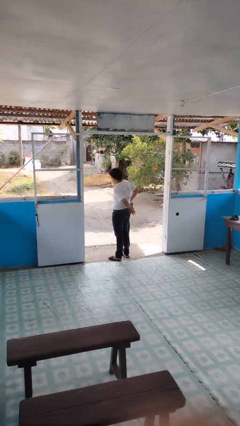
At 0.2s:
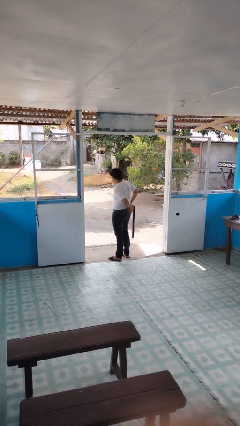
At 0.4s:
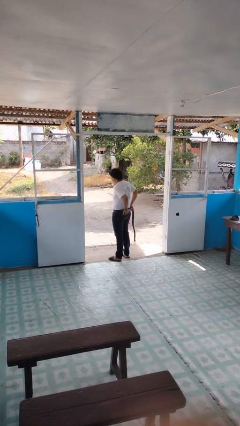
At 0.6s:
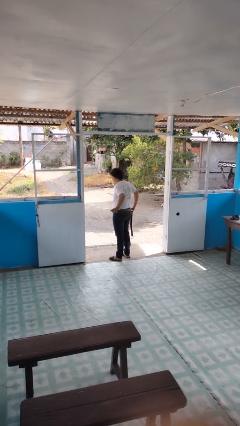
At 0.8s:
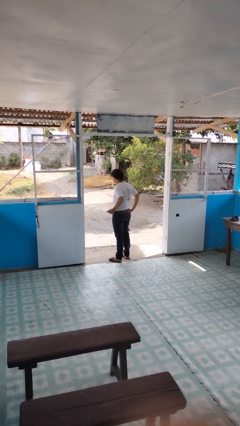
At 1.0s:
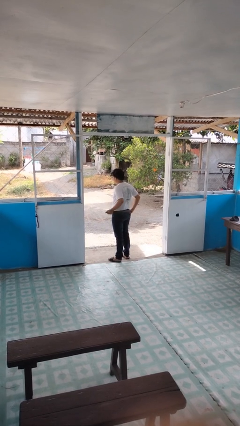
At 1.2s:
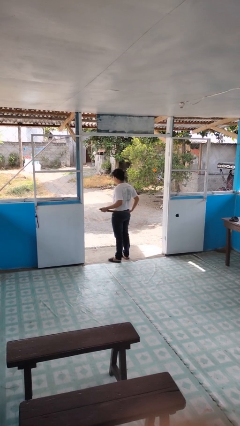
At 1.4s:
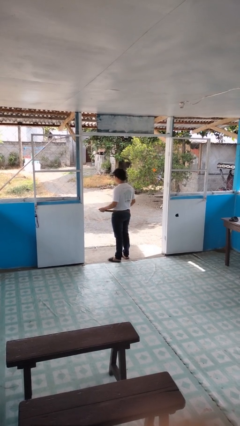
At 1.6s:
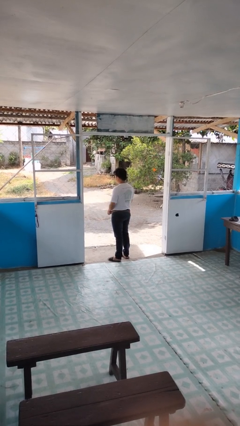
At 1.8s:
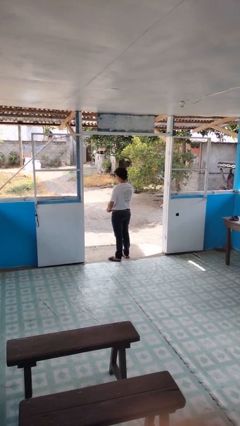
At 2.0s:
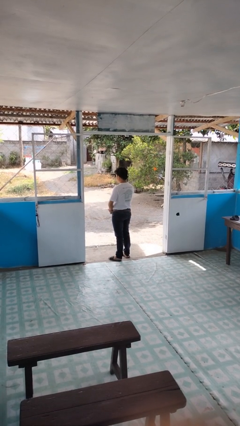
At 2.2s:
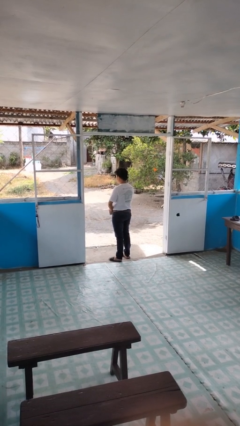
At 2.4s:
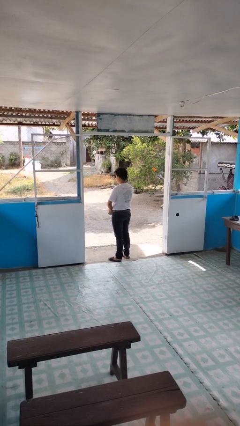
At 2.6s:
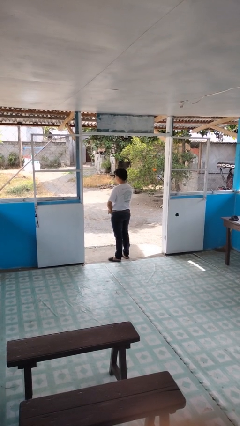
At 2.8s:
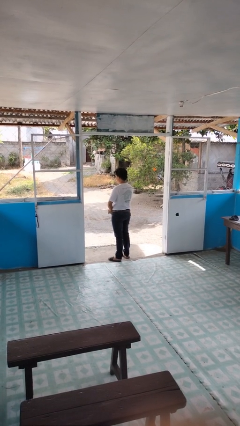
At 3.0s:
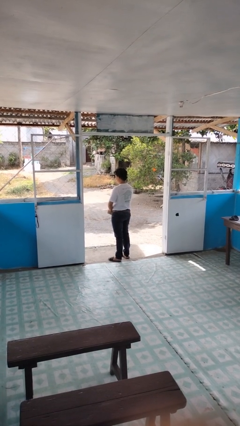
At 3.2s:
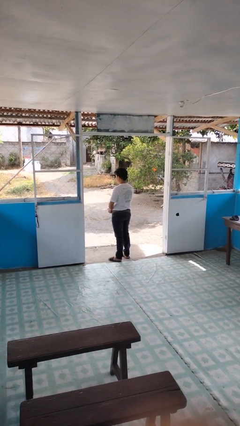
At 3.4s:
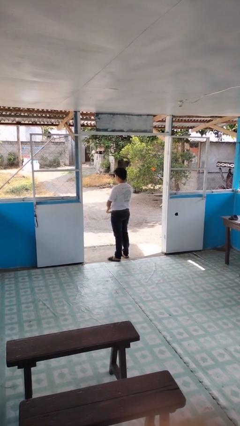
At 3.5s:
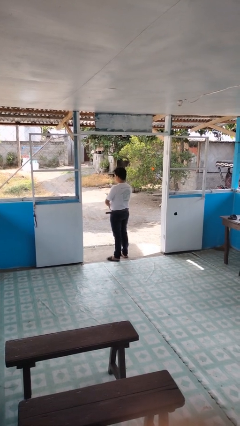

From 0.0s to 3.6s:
person puts on belt

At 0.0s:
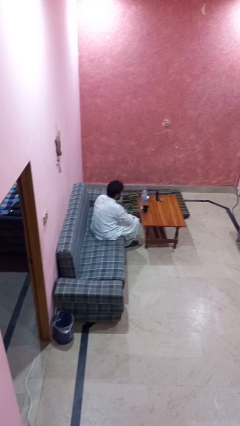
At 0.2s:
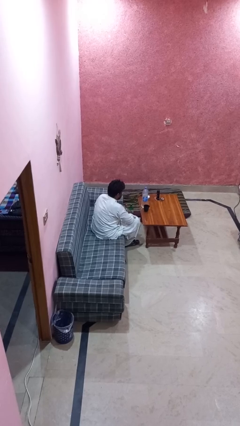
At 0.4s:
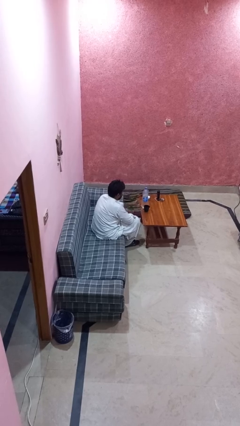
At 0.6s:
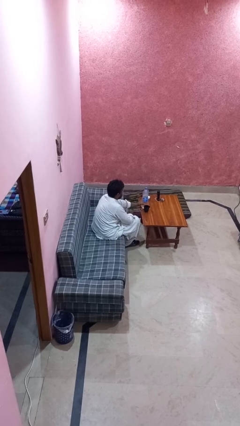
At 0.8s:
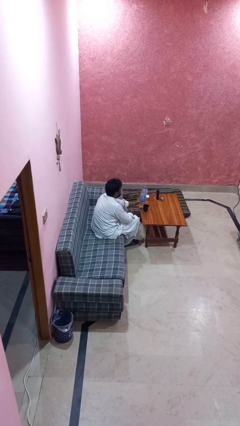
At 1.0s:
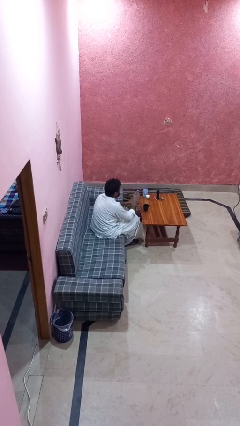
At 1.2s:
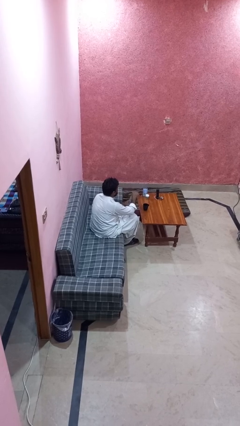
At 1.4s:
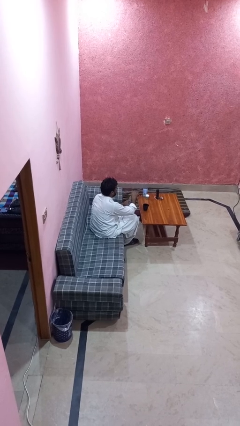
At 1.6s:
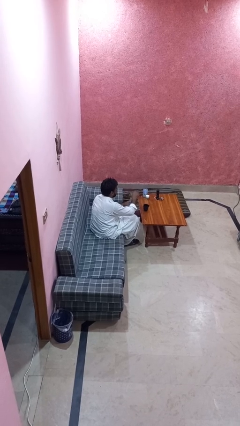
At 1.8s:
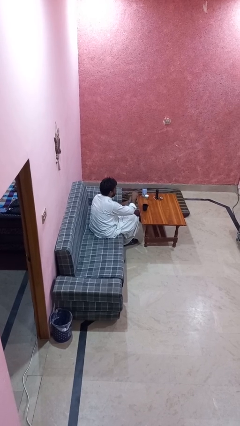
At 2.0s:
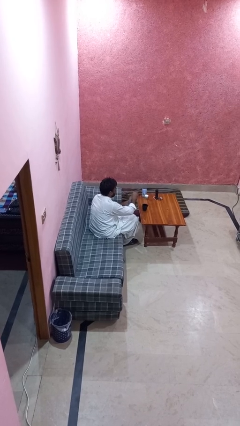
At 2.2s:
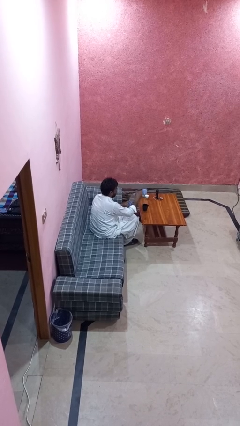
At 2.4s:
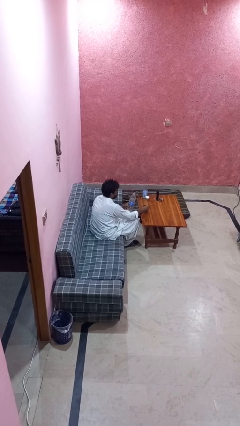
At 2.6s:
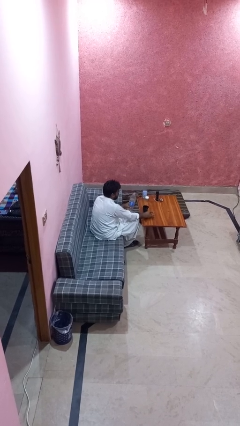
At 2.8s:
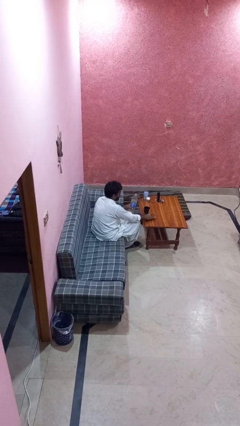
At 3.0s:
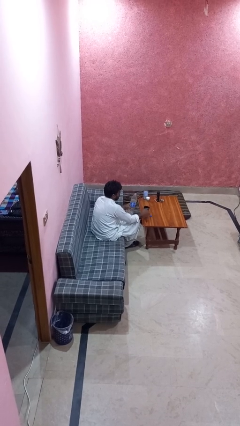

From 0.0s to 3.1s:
person unscrews lid from bottle

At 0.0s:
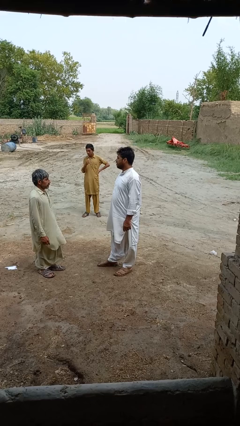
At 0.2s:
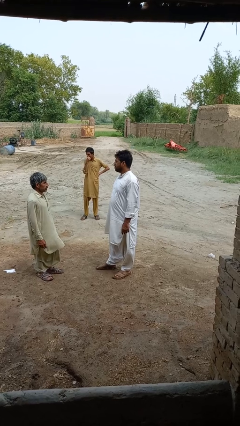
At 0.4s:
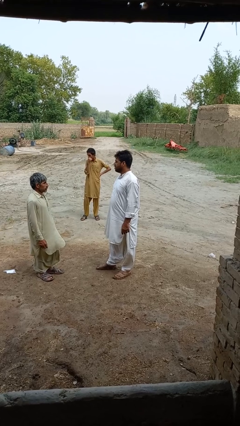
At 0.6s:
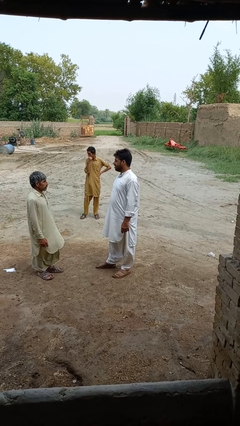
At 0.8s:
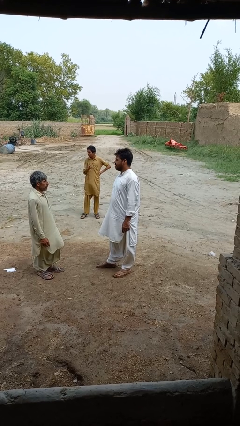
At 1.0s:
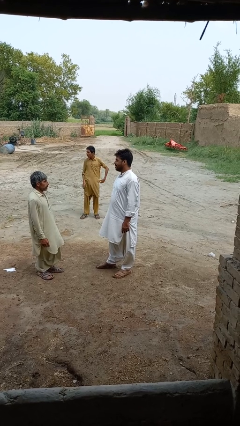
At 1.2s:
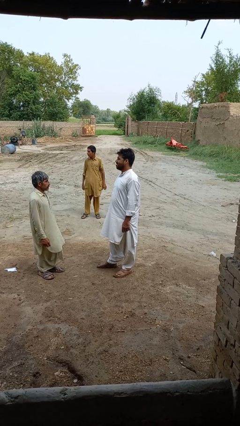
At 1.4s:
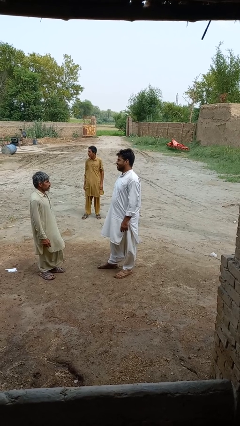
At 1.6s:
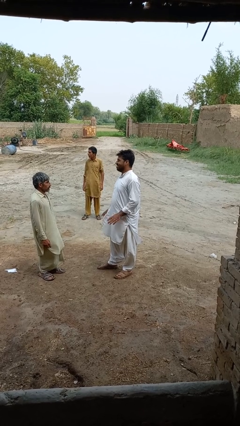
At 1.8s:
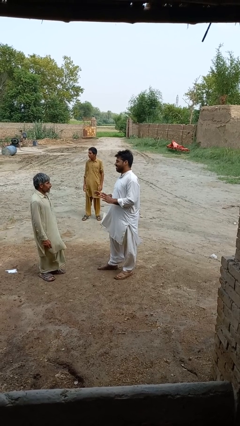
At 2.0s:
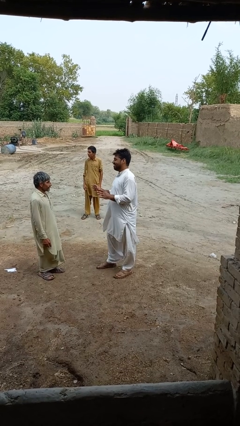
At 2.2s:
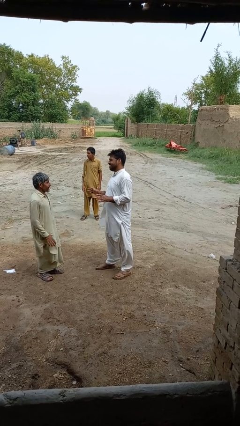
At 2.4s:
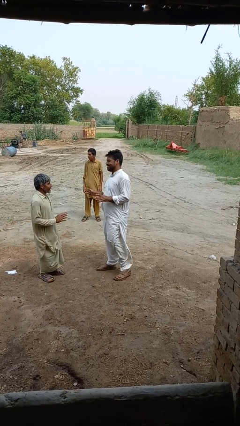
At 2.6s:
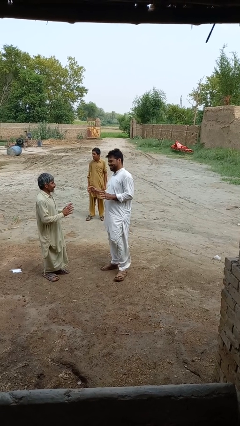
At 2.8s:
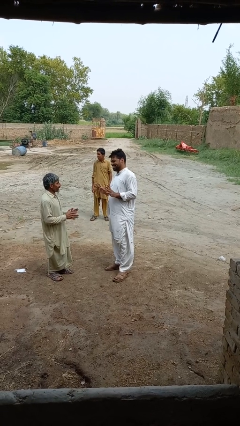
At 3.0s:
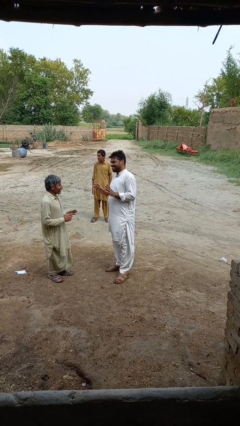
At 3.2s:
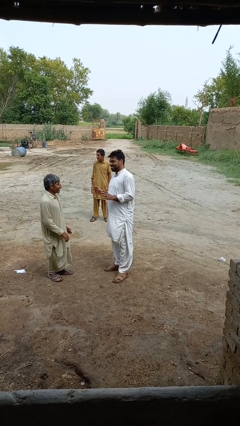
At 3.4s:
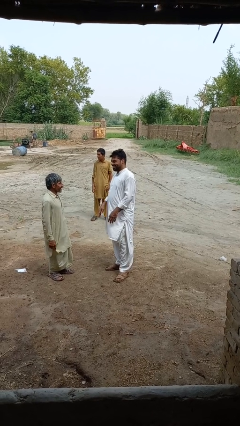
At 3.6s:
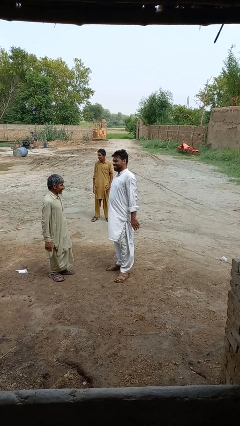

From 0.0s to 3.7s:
person laughs with person

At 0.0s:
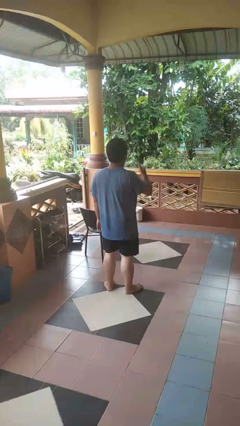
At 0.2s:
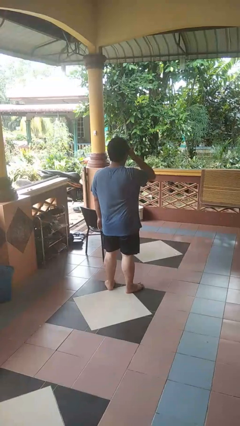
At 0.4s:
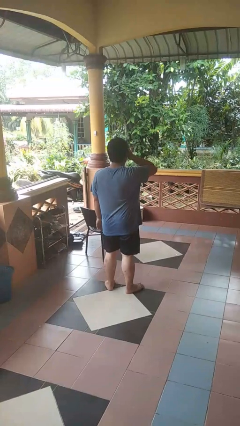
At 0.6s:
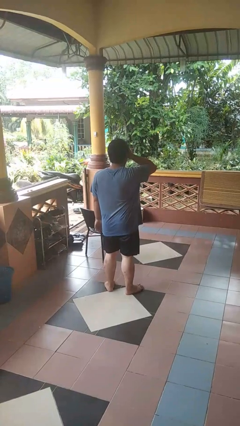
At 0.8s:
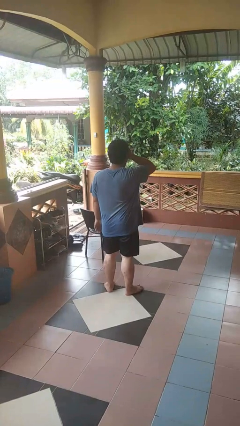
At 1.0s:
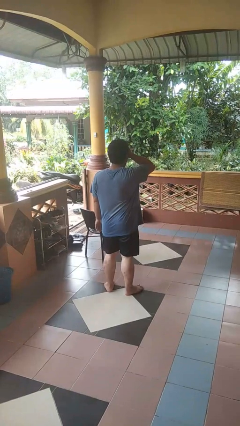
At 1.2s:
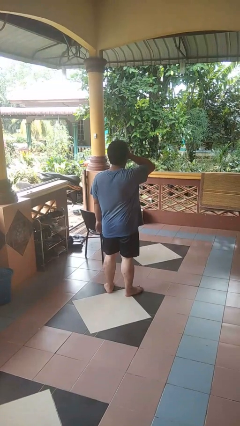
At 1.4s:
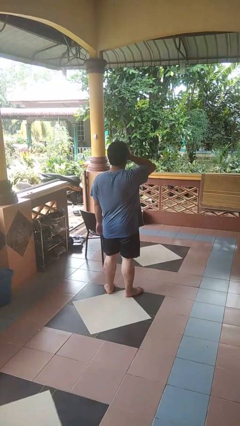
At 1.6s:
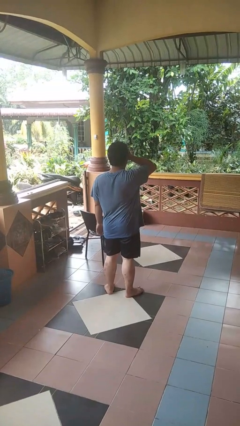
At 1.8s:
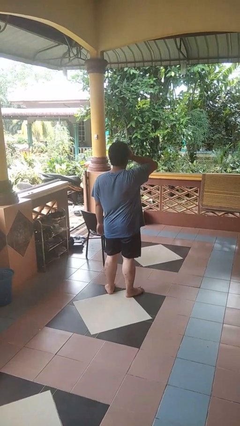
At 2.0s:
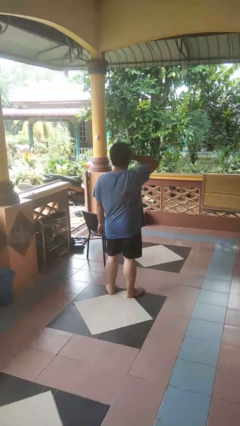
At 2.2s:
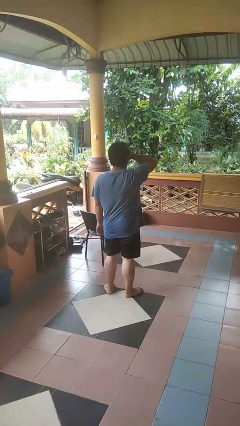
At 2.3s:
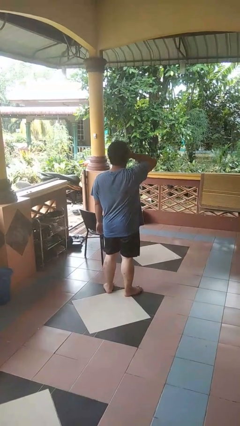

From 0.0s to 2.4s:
person rubs eyes

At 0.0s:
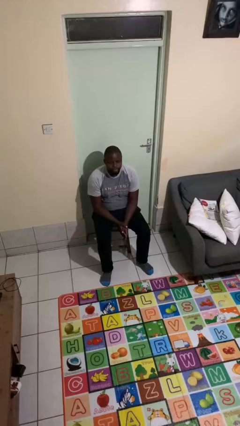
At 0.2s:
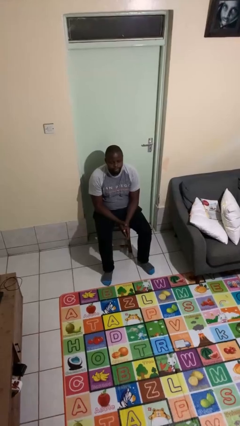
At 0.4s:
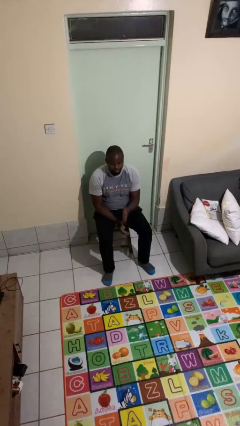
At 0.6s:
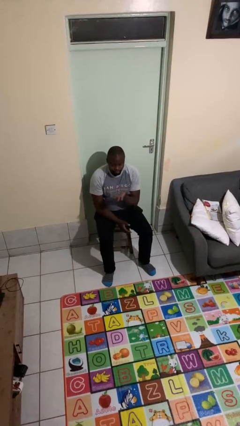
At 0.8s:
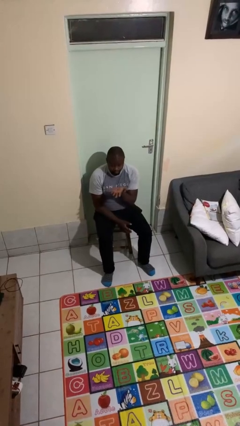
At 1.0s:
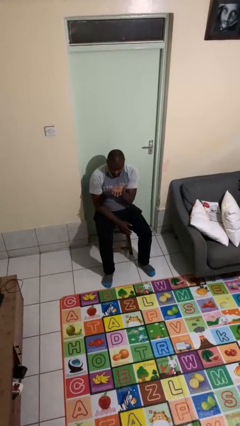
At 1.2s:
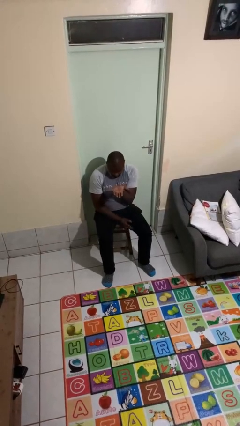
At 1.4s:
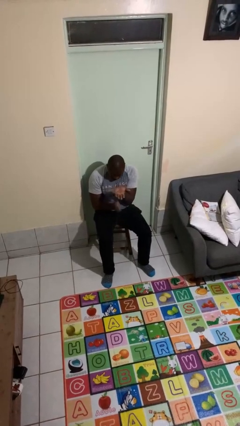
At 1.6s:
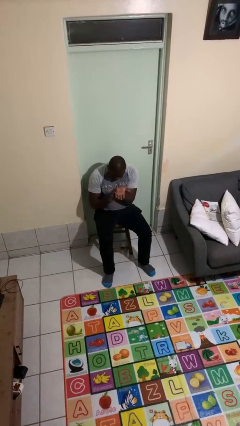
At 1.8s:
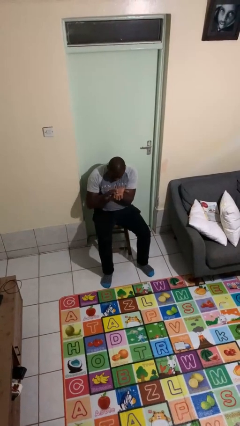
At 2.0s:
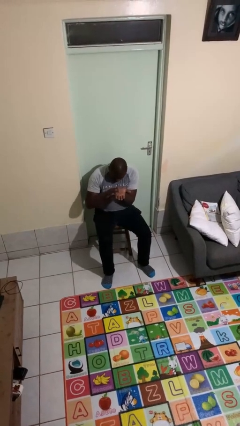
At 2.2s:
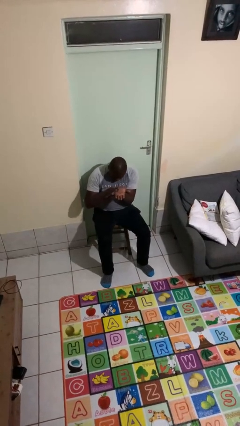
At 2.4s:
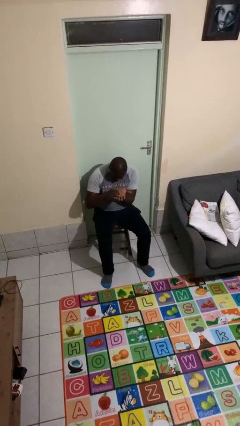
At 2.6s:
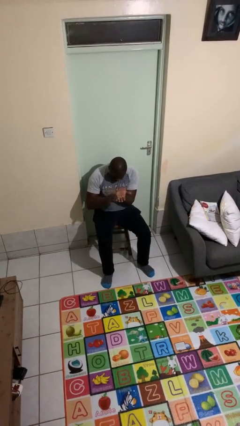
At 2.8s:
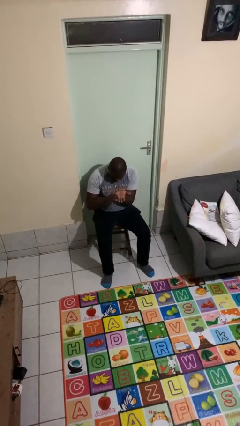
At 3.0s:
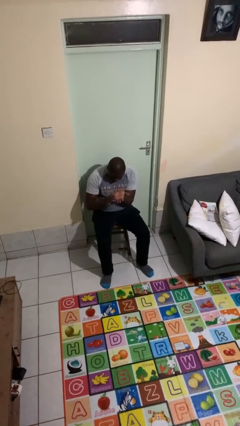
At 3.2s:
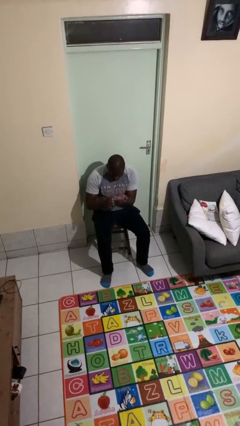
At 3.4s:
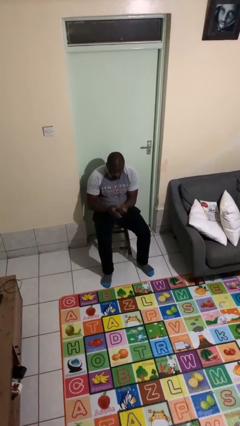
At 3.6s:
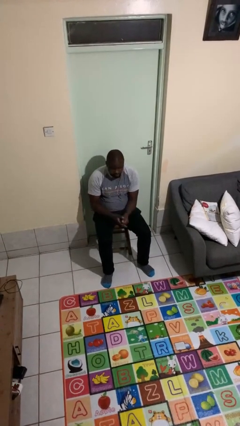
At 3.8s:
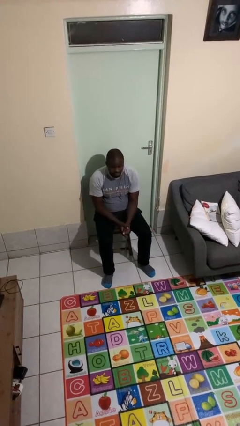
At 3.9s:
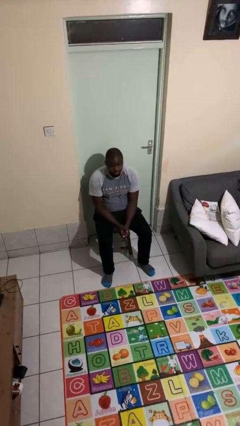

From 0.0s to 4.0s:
person looks at hands in lap

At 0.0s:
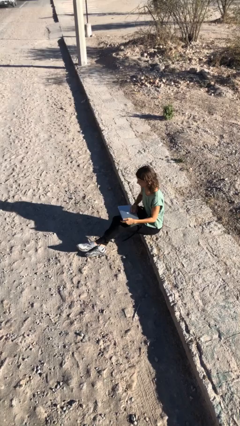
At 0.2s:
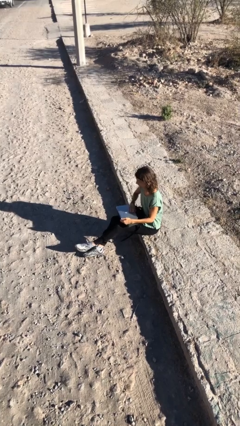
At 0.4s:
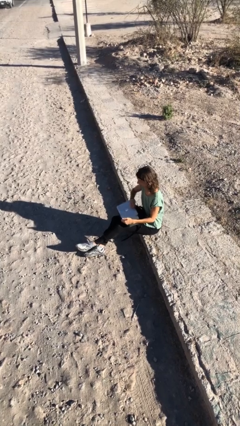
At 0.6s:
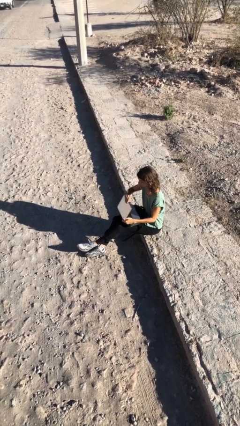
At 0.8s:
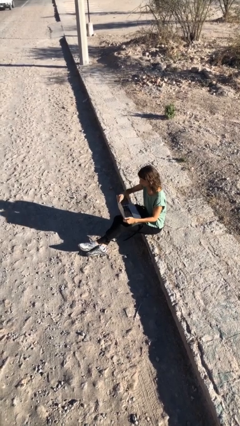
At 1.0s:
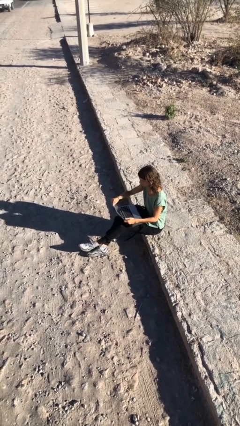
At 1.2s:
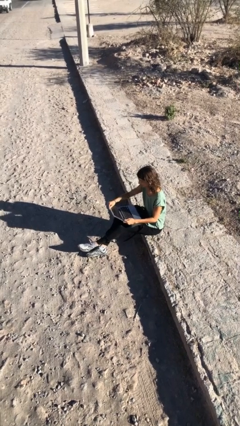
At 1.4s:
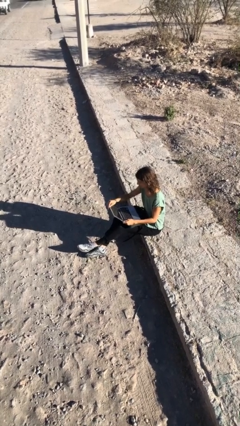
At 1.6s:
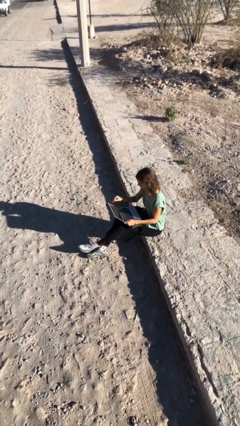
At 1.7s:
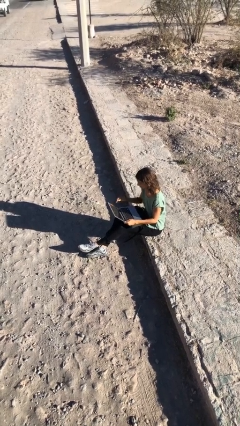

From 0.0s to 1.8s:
person interacts with laptop
